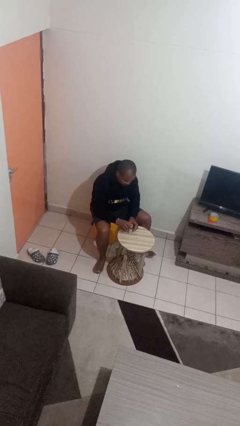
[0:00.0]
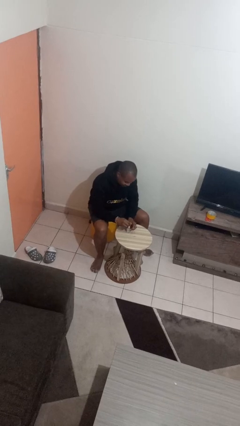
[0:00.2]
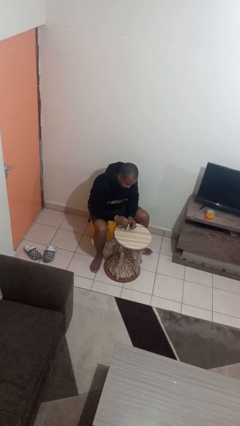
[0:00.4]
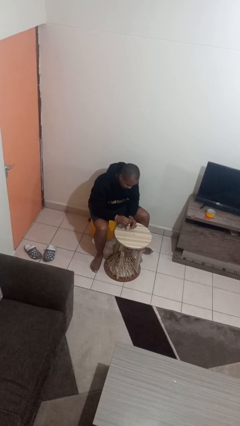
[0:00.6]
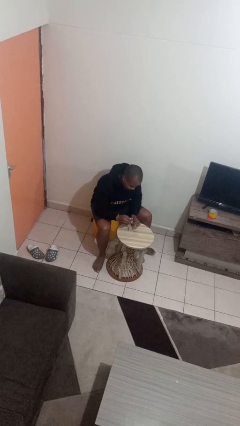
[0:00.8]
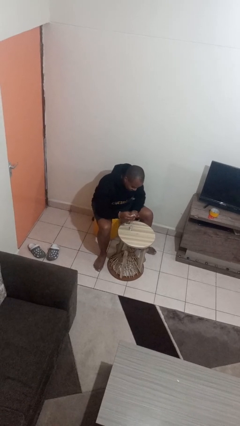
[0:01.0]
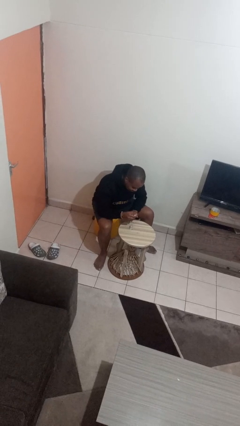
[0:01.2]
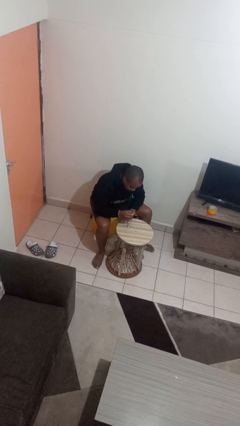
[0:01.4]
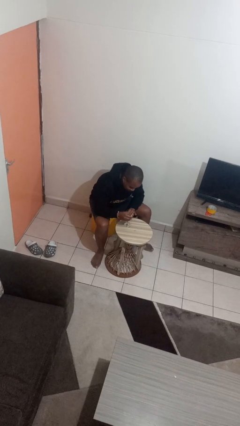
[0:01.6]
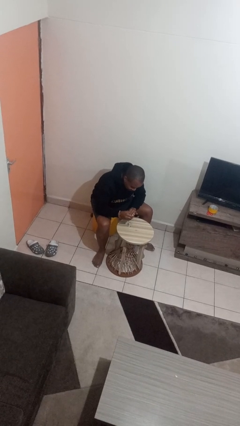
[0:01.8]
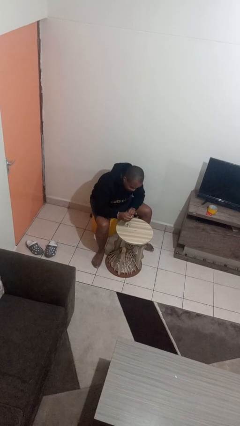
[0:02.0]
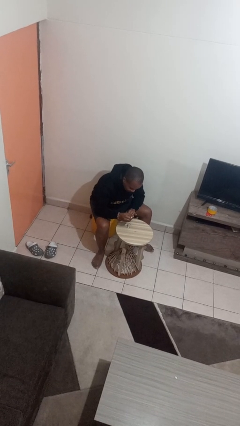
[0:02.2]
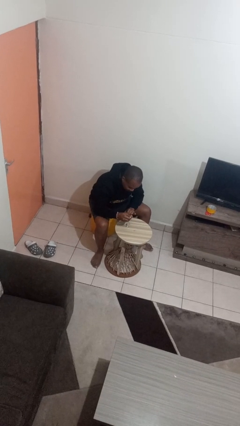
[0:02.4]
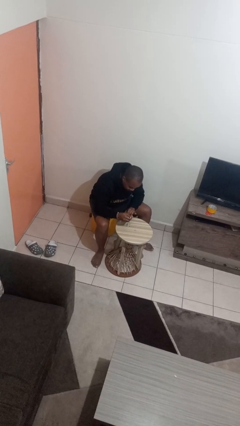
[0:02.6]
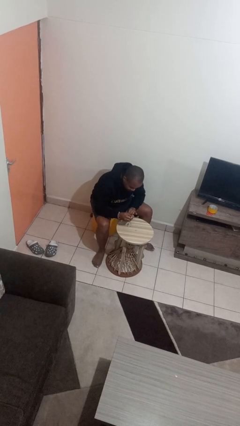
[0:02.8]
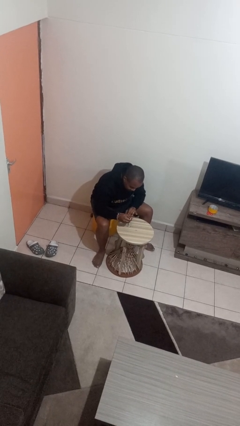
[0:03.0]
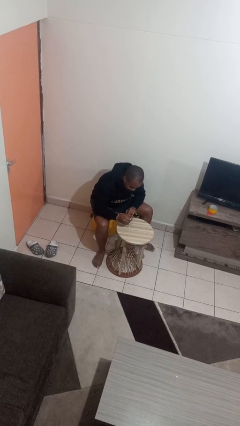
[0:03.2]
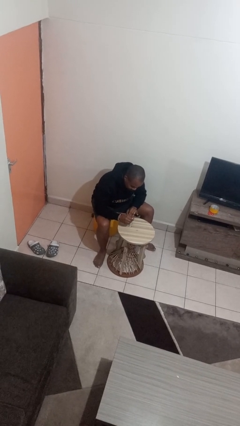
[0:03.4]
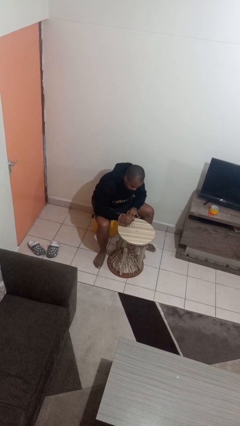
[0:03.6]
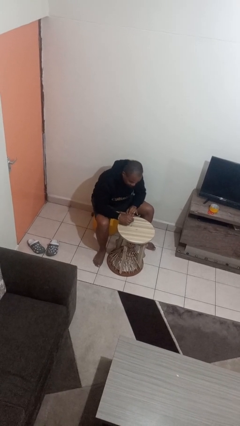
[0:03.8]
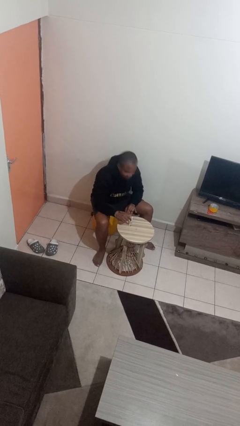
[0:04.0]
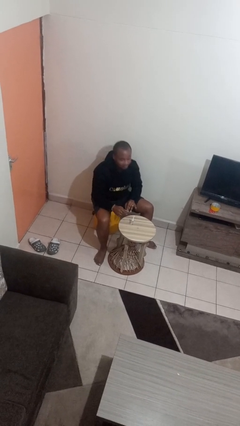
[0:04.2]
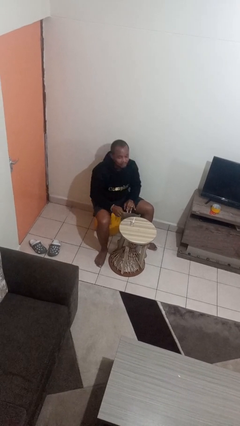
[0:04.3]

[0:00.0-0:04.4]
person paints fingernails

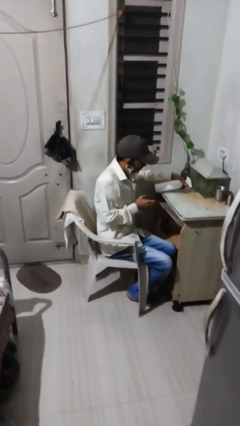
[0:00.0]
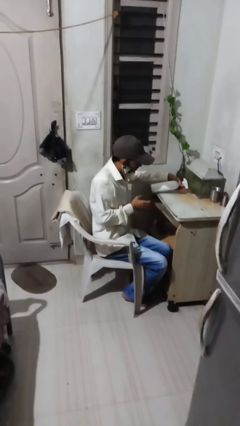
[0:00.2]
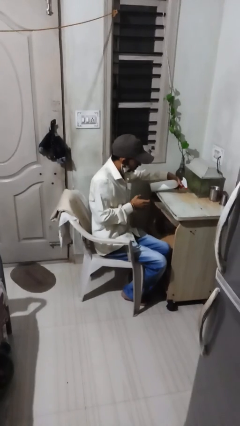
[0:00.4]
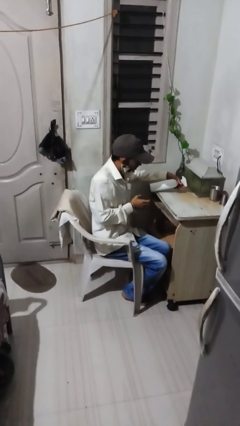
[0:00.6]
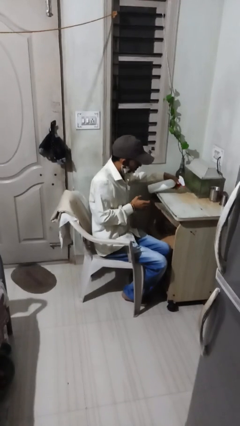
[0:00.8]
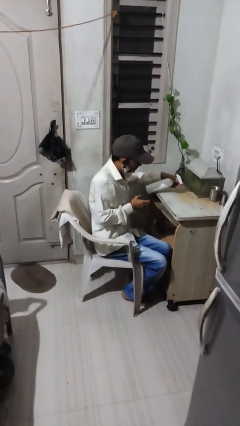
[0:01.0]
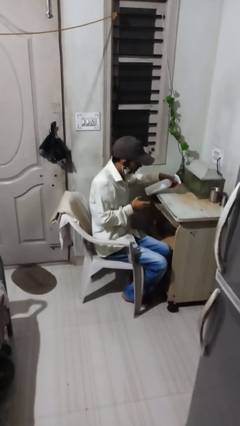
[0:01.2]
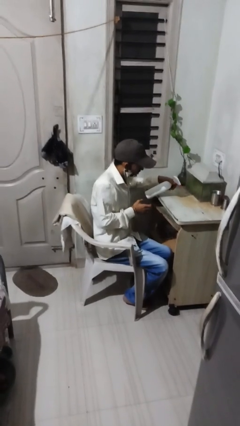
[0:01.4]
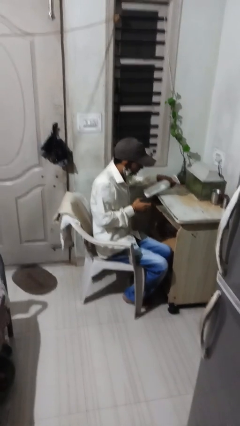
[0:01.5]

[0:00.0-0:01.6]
person sprays from bottle

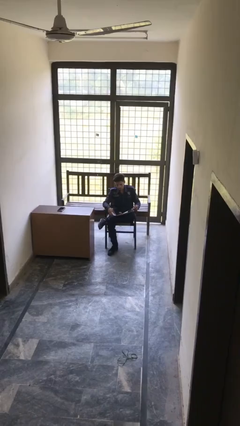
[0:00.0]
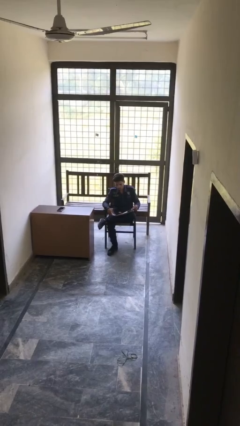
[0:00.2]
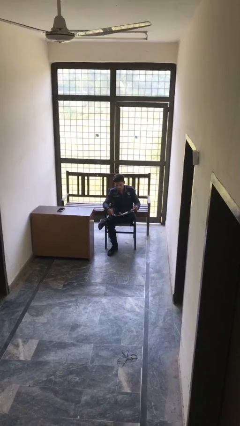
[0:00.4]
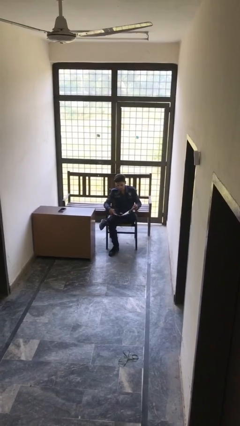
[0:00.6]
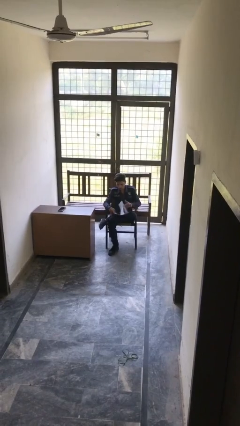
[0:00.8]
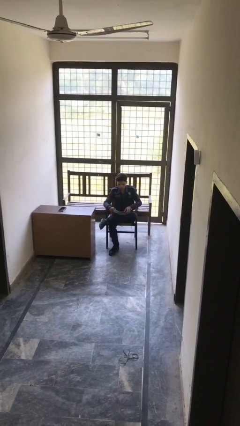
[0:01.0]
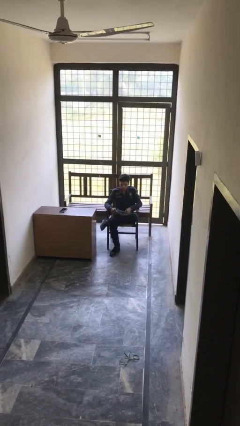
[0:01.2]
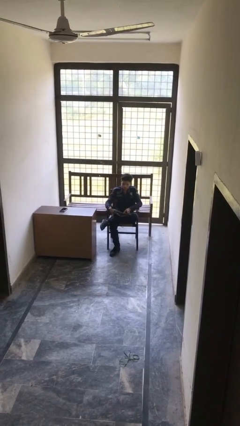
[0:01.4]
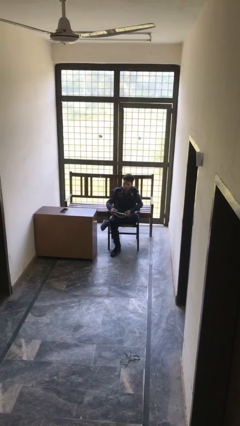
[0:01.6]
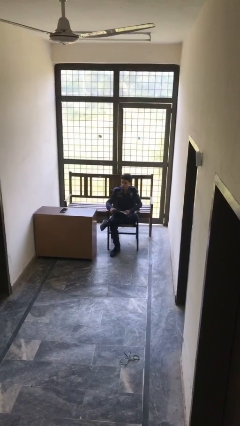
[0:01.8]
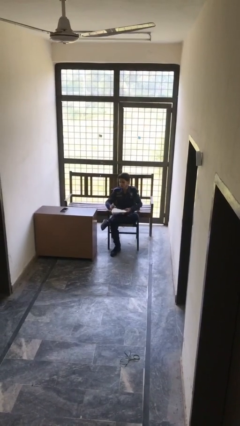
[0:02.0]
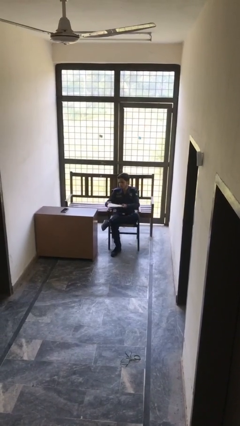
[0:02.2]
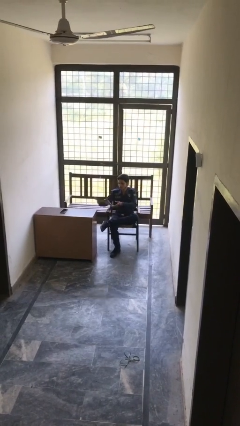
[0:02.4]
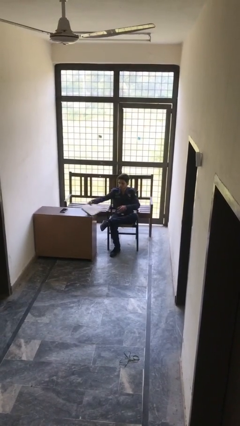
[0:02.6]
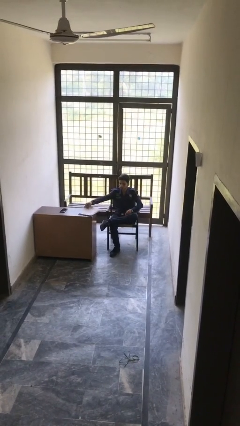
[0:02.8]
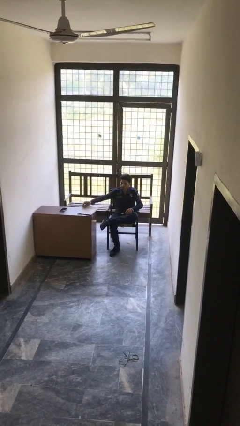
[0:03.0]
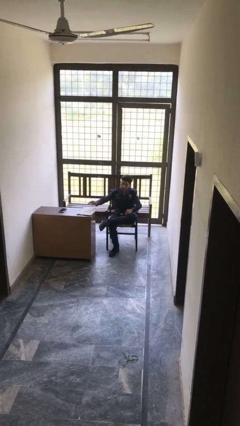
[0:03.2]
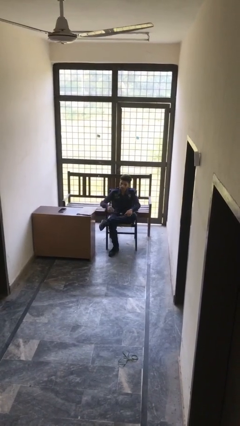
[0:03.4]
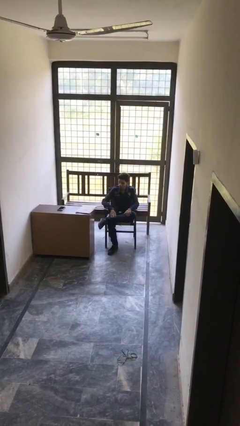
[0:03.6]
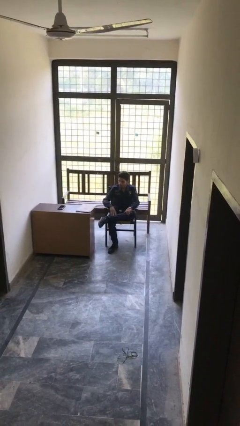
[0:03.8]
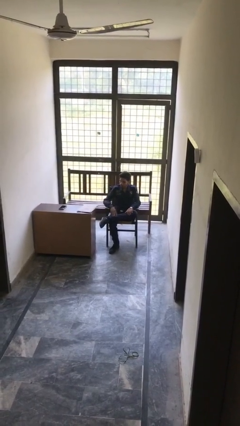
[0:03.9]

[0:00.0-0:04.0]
person puts down object on table

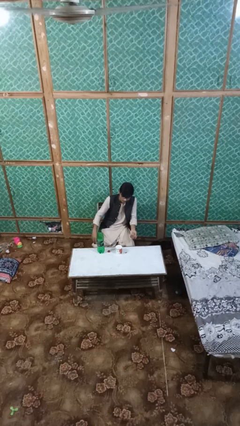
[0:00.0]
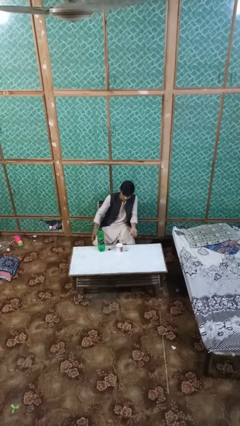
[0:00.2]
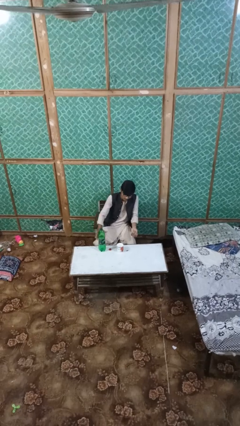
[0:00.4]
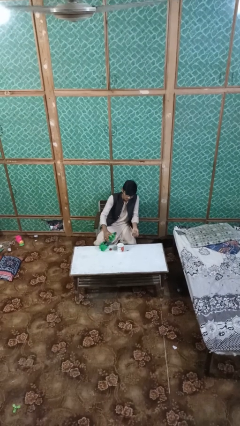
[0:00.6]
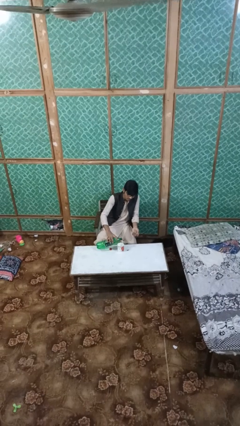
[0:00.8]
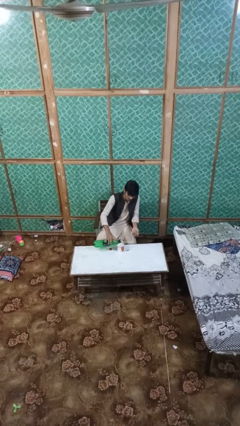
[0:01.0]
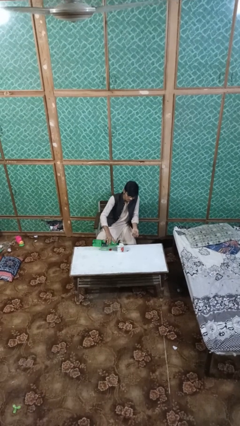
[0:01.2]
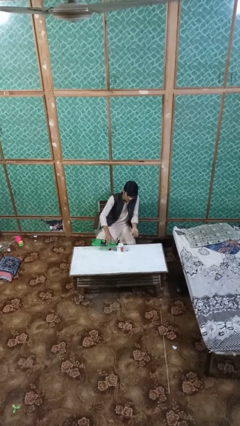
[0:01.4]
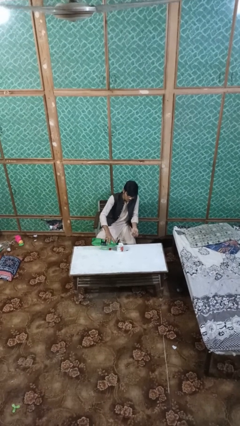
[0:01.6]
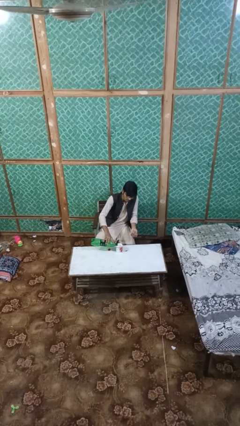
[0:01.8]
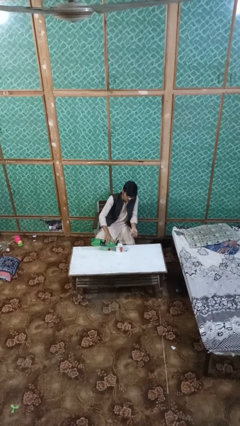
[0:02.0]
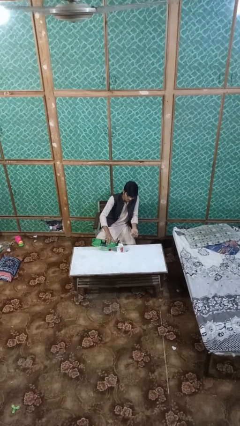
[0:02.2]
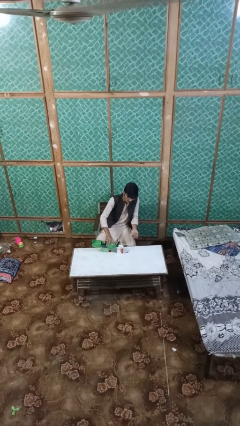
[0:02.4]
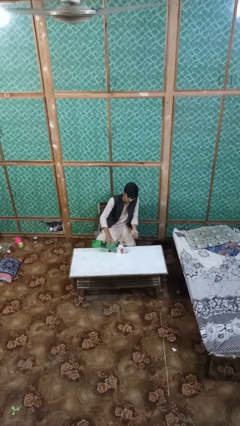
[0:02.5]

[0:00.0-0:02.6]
person pours liquid into cup

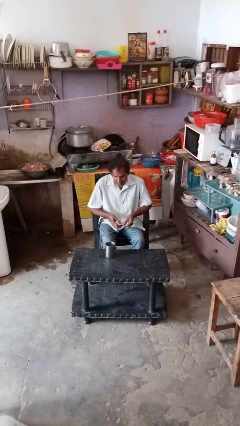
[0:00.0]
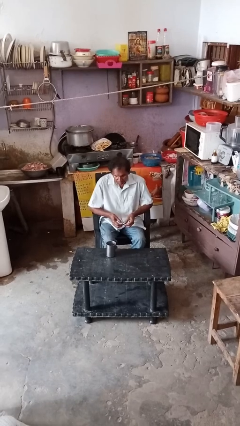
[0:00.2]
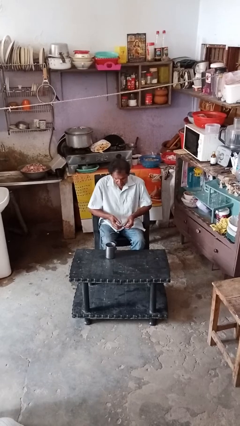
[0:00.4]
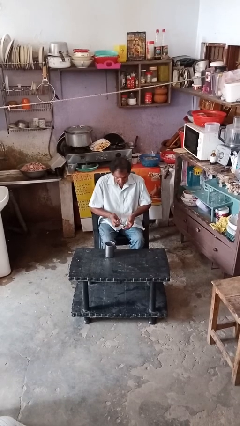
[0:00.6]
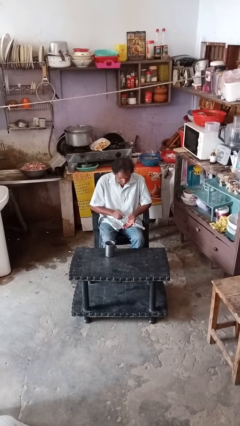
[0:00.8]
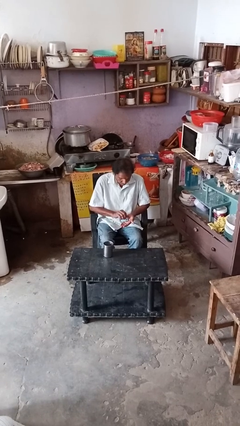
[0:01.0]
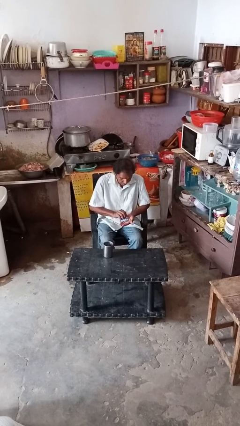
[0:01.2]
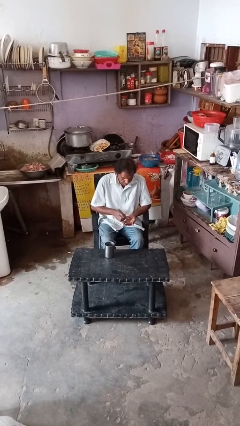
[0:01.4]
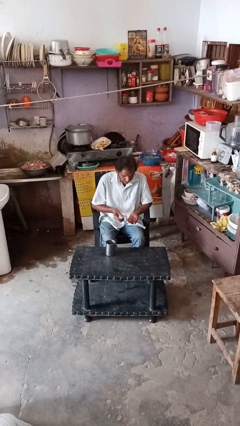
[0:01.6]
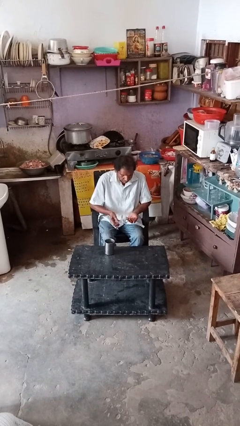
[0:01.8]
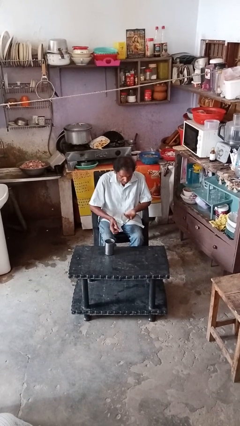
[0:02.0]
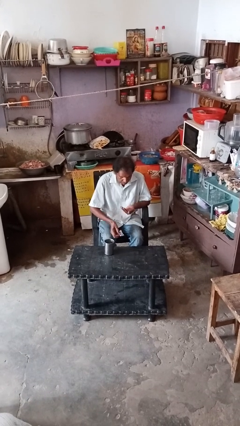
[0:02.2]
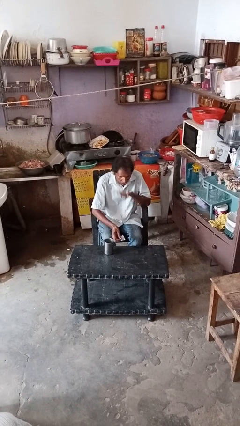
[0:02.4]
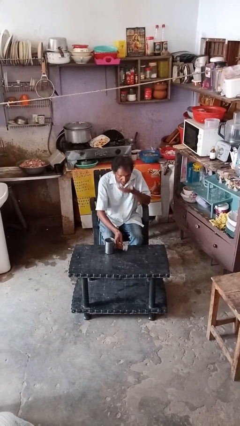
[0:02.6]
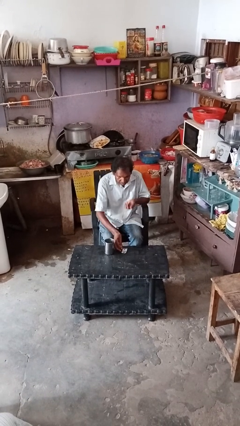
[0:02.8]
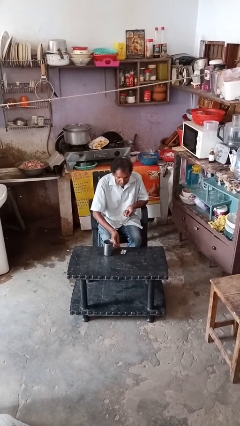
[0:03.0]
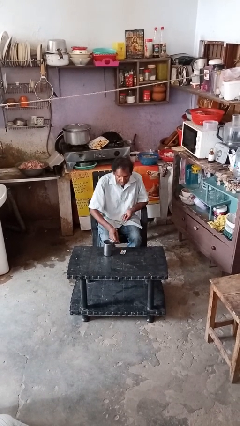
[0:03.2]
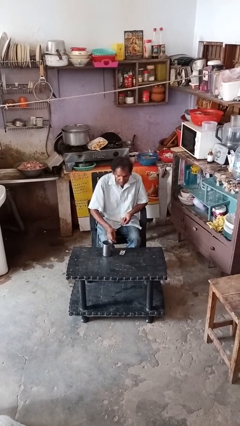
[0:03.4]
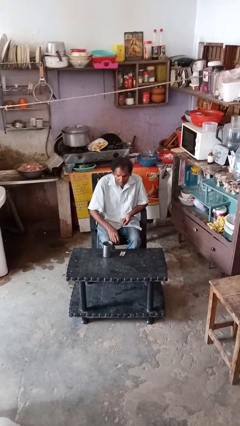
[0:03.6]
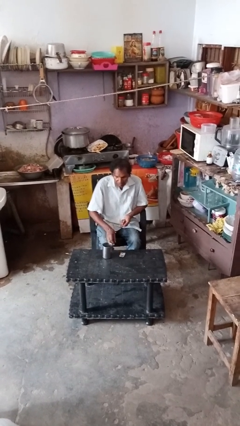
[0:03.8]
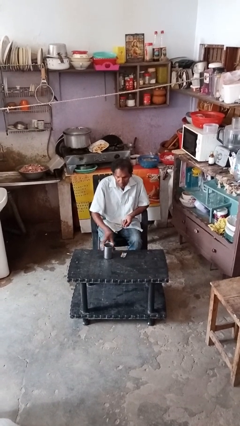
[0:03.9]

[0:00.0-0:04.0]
person takes medicine pills

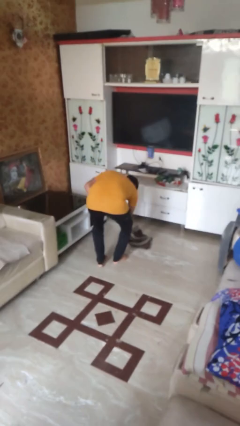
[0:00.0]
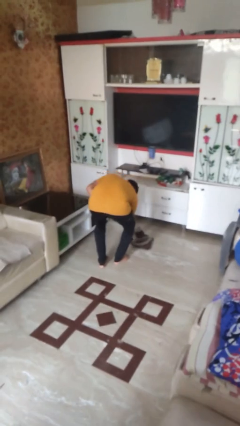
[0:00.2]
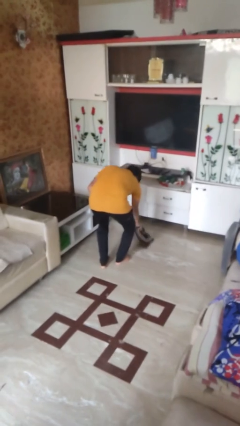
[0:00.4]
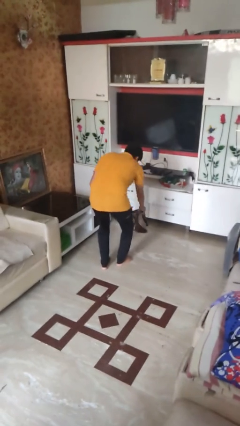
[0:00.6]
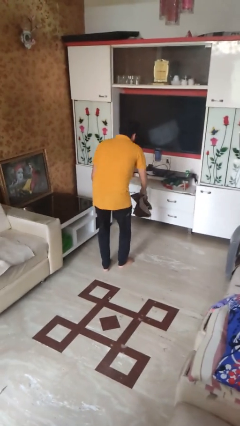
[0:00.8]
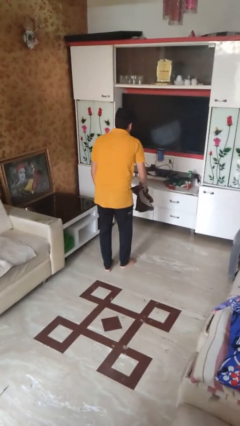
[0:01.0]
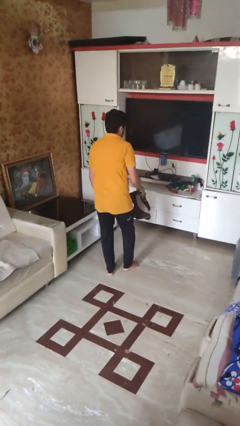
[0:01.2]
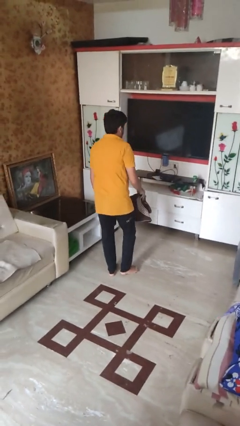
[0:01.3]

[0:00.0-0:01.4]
person picks up object from floor
